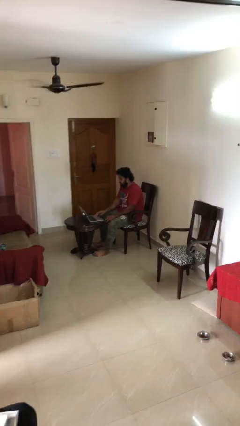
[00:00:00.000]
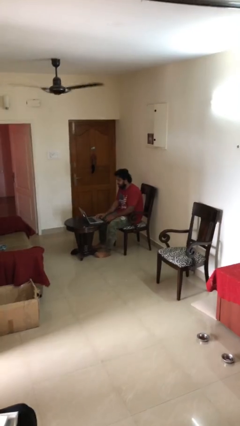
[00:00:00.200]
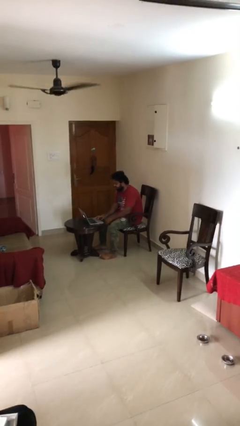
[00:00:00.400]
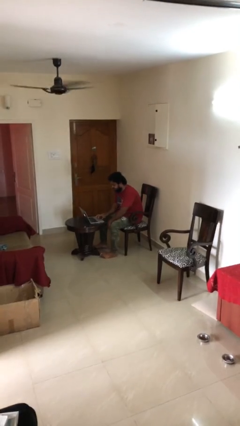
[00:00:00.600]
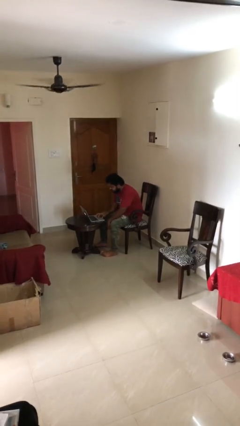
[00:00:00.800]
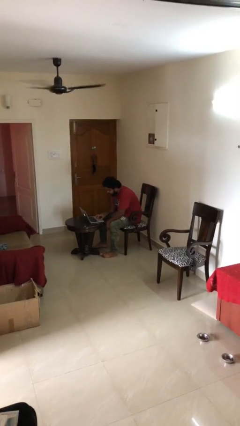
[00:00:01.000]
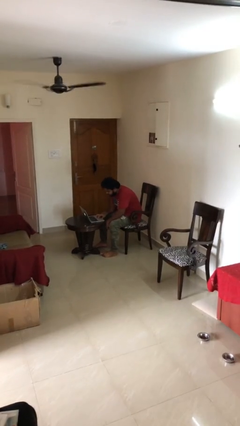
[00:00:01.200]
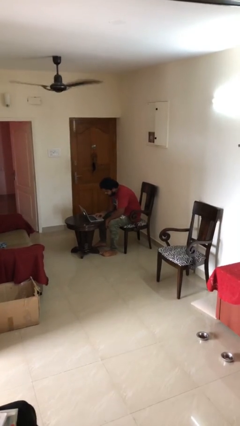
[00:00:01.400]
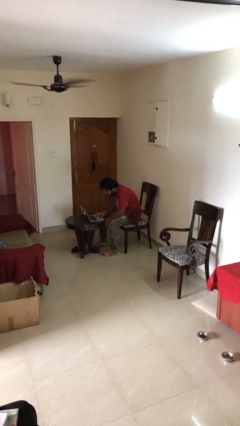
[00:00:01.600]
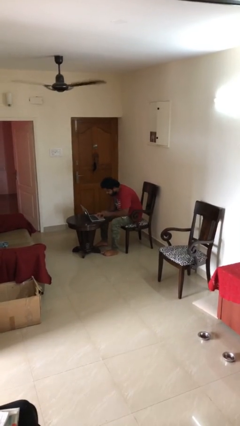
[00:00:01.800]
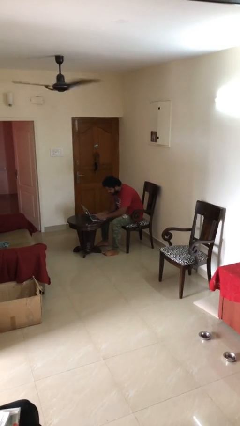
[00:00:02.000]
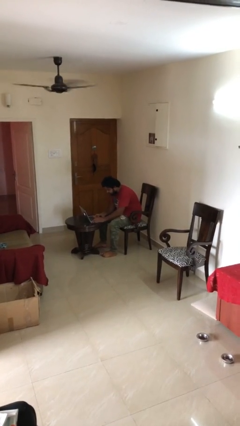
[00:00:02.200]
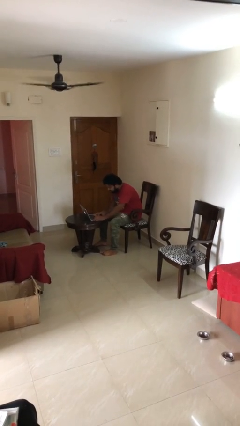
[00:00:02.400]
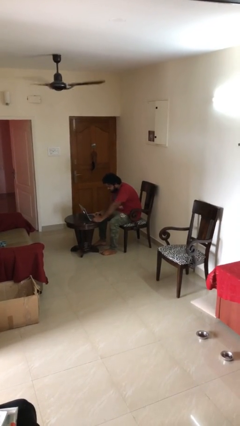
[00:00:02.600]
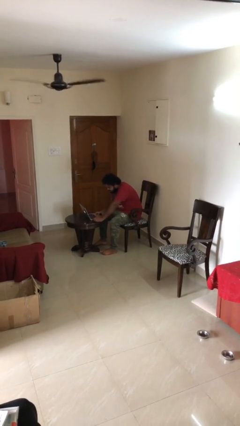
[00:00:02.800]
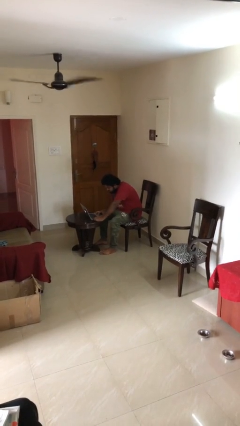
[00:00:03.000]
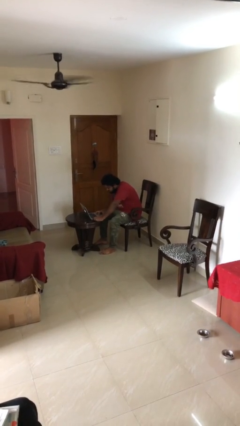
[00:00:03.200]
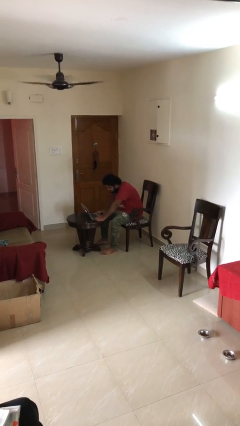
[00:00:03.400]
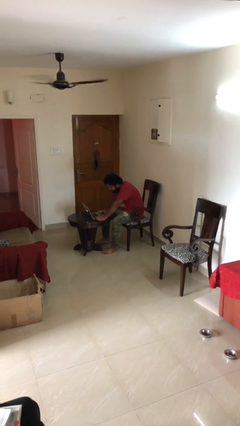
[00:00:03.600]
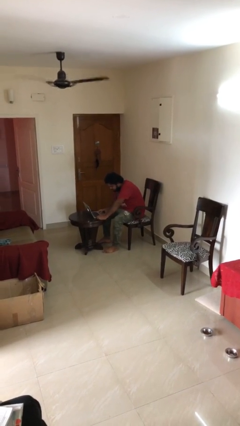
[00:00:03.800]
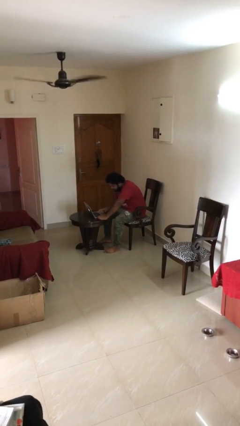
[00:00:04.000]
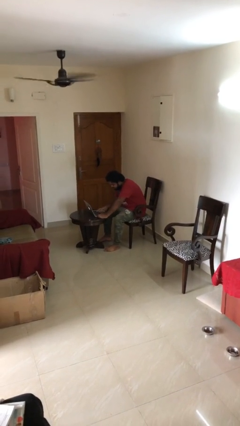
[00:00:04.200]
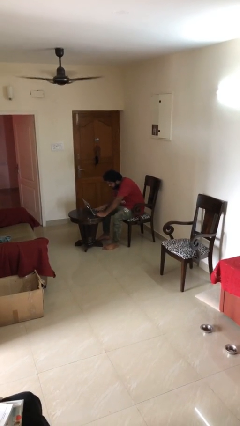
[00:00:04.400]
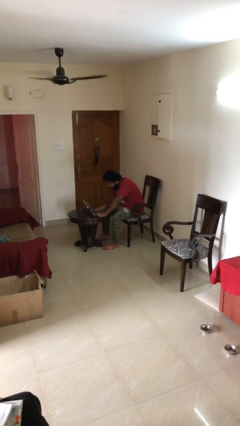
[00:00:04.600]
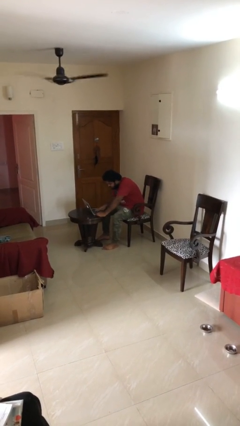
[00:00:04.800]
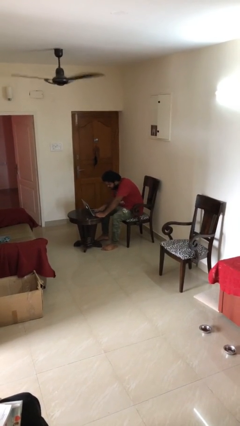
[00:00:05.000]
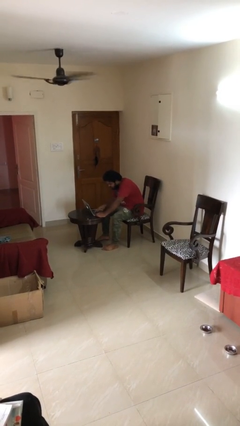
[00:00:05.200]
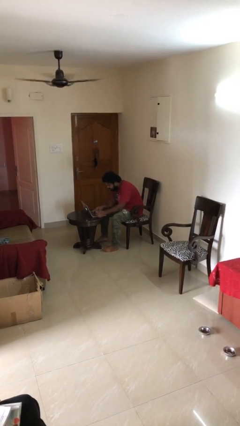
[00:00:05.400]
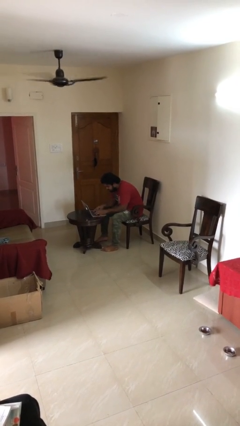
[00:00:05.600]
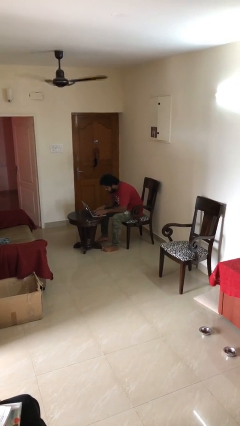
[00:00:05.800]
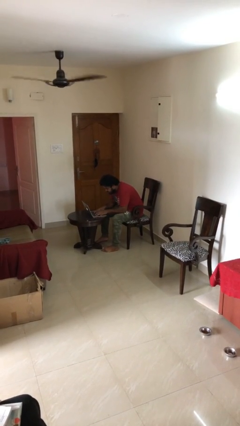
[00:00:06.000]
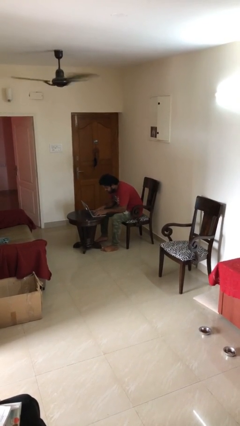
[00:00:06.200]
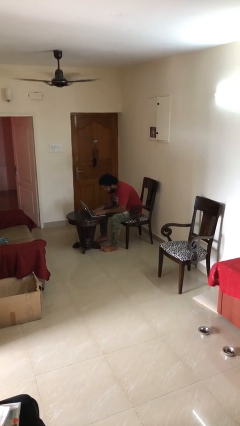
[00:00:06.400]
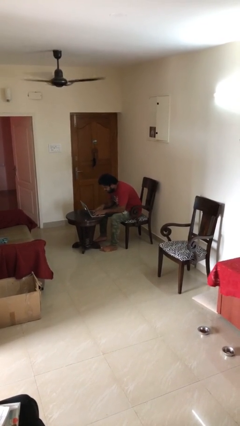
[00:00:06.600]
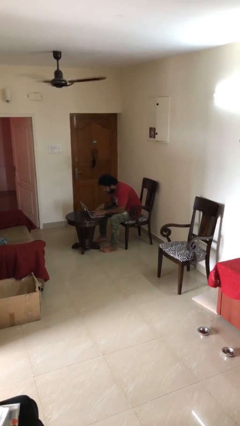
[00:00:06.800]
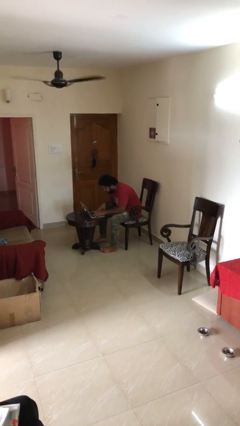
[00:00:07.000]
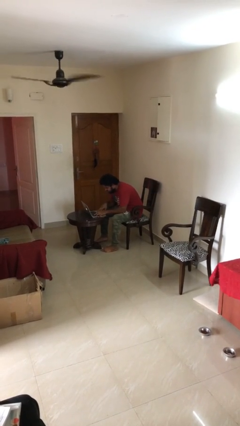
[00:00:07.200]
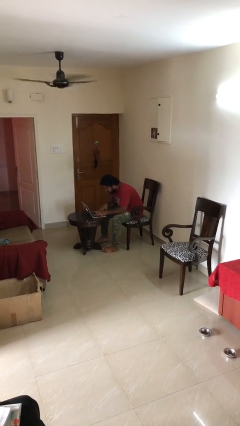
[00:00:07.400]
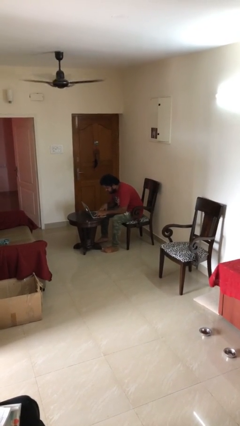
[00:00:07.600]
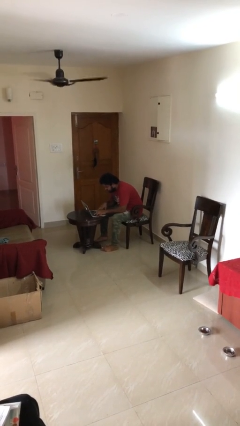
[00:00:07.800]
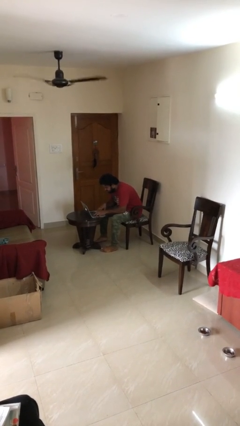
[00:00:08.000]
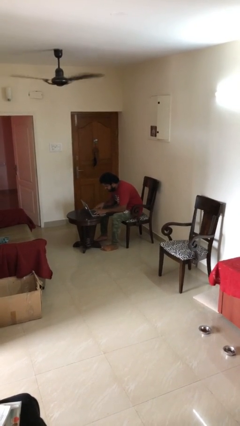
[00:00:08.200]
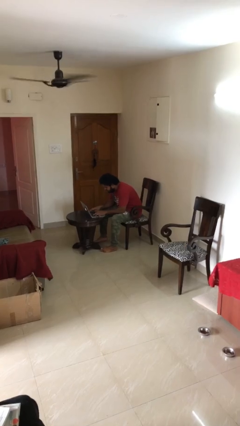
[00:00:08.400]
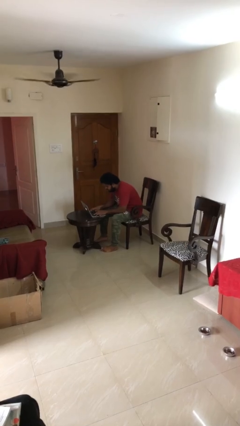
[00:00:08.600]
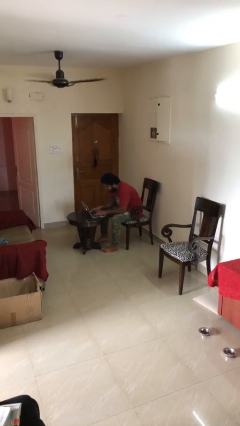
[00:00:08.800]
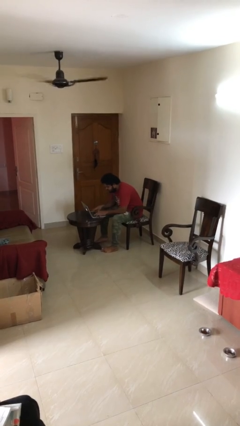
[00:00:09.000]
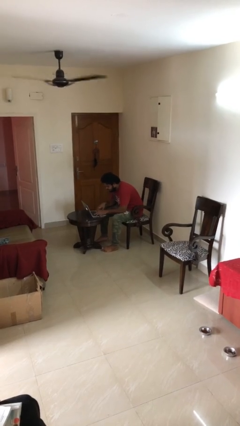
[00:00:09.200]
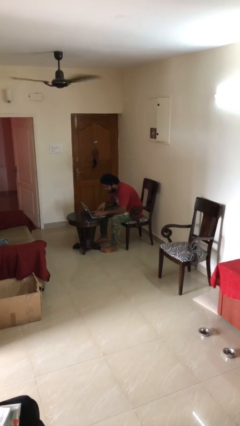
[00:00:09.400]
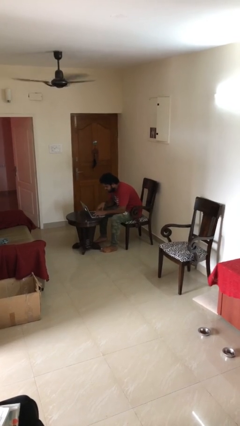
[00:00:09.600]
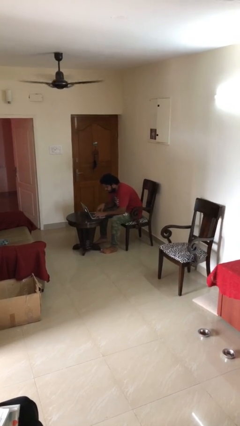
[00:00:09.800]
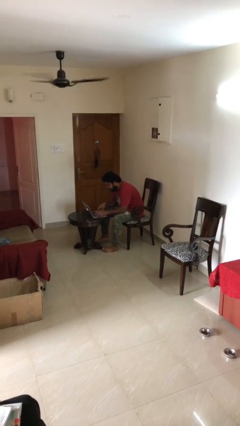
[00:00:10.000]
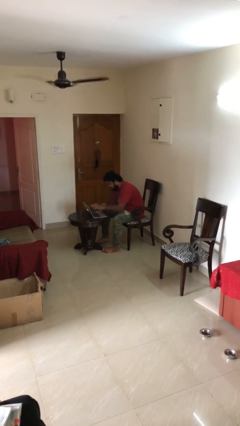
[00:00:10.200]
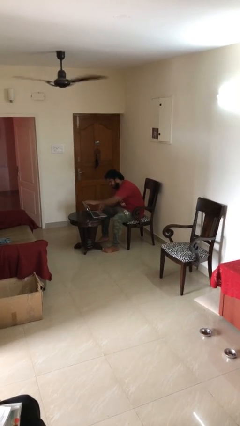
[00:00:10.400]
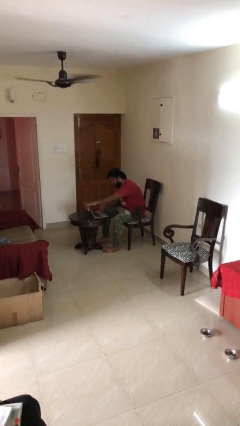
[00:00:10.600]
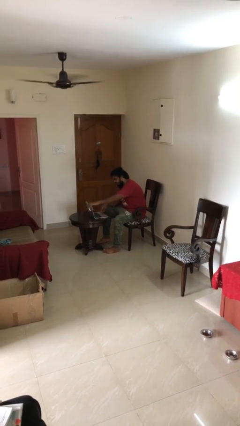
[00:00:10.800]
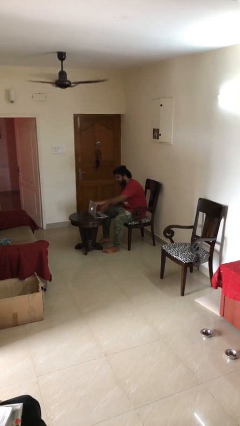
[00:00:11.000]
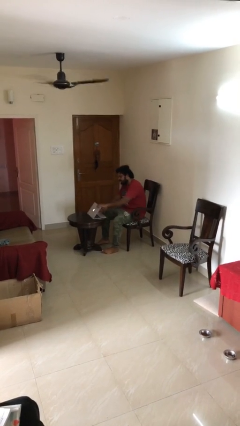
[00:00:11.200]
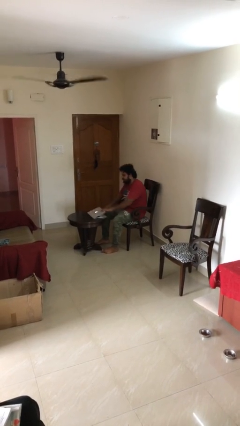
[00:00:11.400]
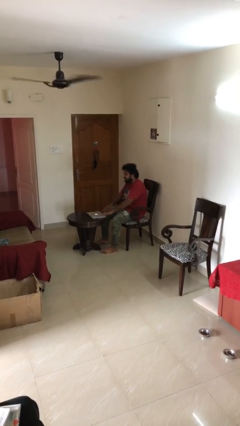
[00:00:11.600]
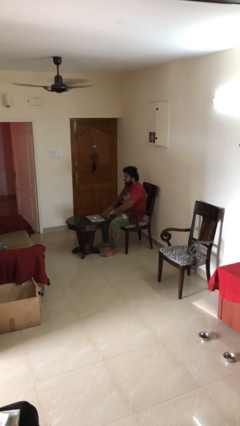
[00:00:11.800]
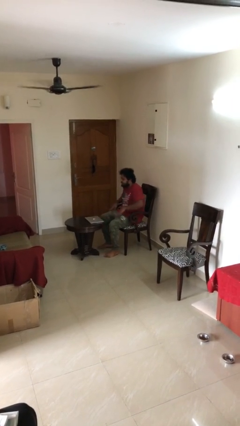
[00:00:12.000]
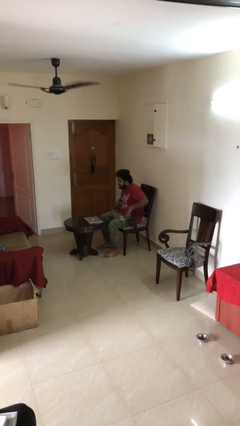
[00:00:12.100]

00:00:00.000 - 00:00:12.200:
person interacts with laptop

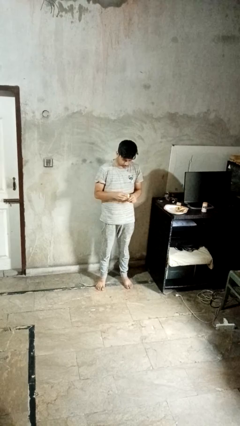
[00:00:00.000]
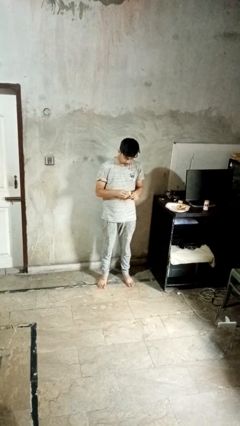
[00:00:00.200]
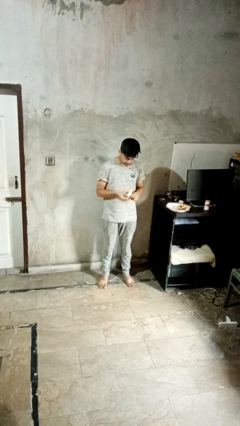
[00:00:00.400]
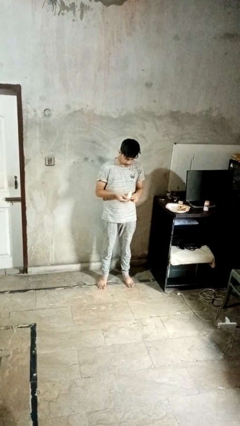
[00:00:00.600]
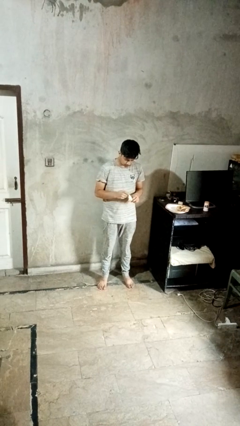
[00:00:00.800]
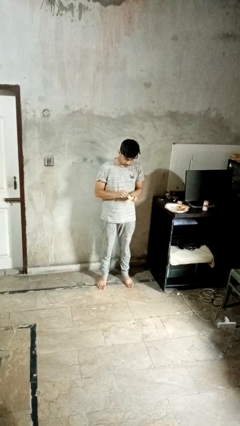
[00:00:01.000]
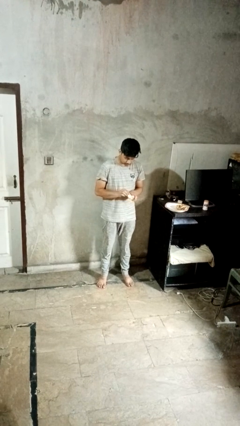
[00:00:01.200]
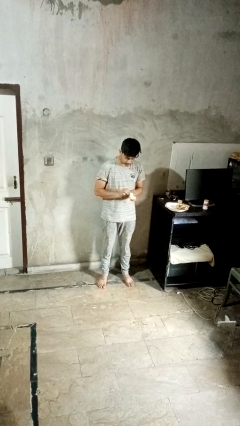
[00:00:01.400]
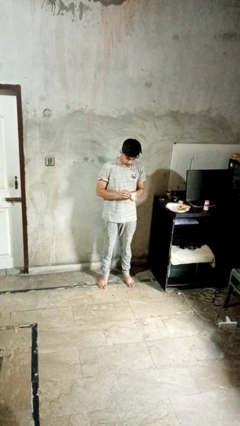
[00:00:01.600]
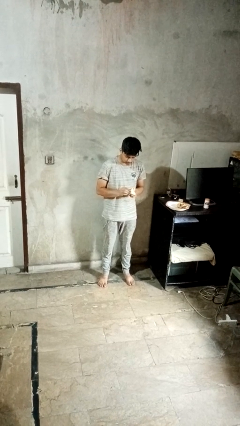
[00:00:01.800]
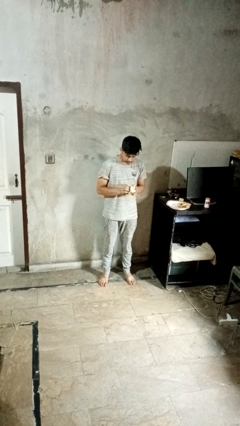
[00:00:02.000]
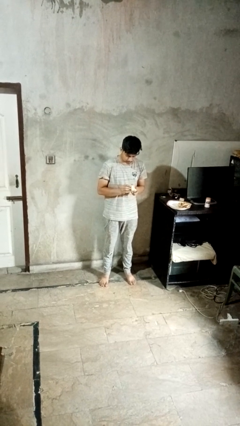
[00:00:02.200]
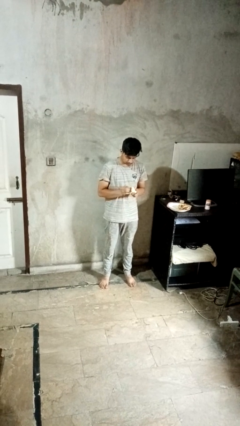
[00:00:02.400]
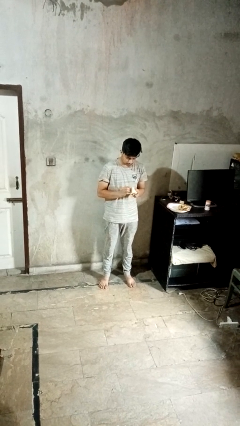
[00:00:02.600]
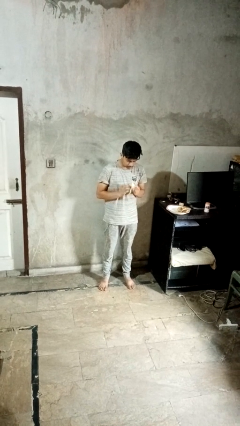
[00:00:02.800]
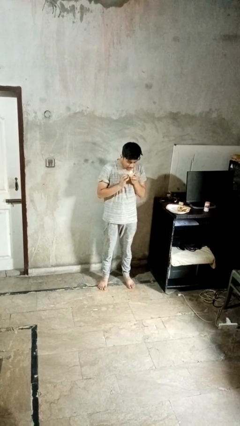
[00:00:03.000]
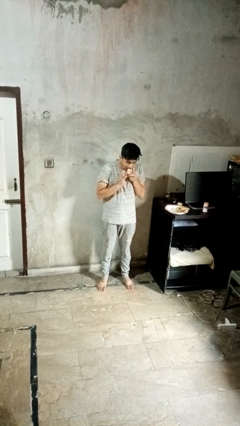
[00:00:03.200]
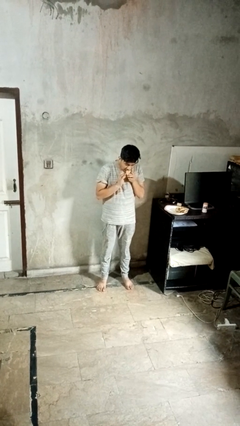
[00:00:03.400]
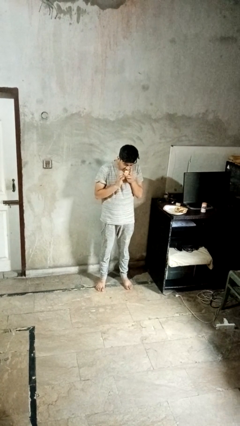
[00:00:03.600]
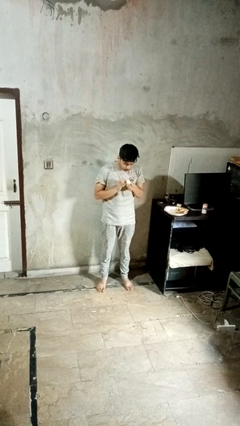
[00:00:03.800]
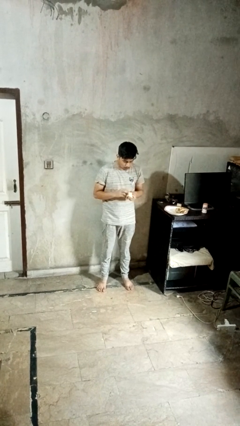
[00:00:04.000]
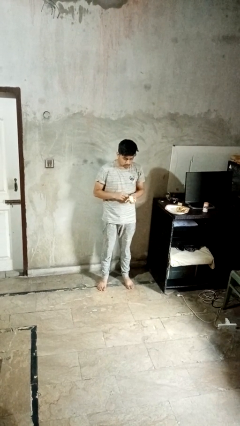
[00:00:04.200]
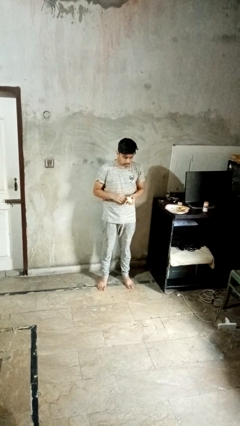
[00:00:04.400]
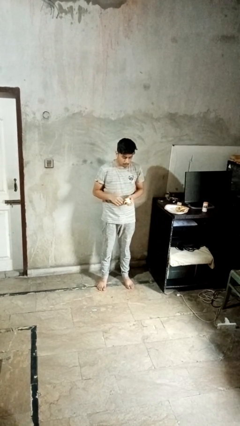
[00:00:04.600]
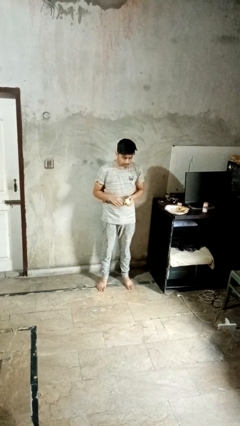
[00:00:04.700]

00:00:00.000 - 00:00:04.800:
person eats banana

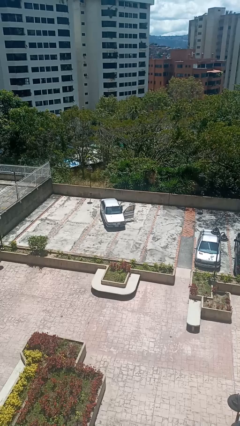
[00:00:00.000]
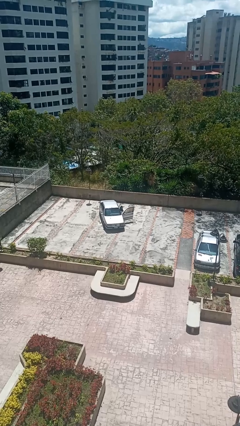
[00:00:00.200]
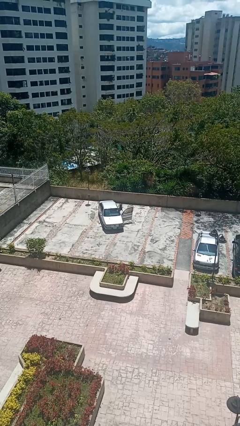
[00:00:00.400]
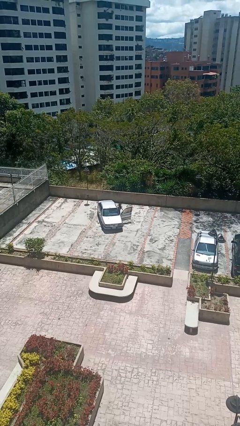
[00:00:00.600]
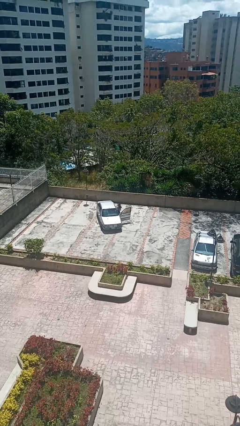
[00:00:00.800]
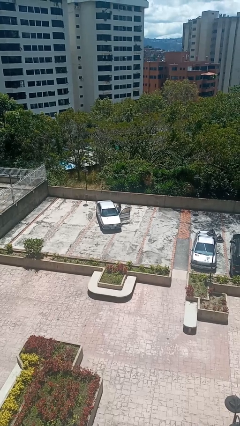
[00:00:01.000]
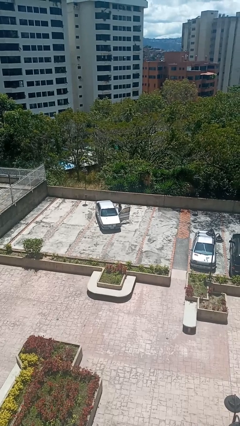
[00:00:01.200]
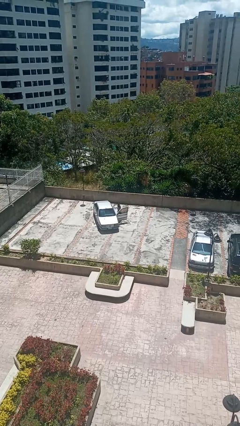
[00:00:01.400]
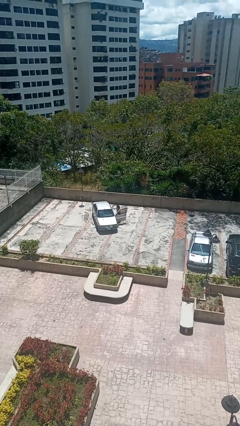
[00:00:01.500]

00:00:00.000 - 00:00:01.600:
person exits car
